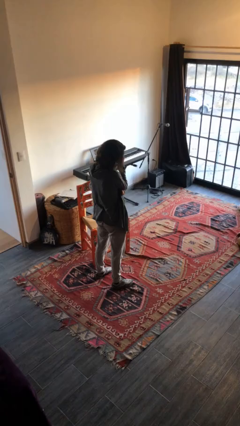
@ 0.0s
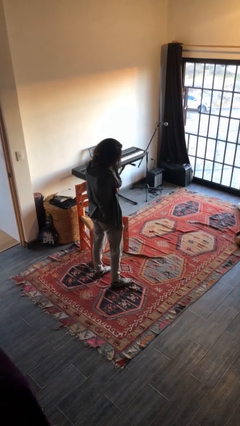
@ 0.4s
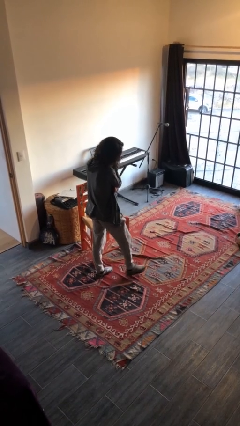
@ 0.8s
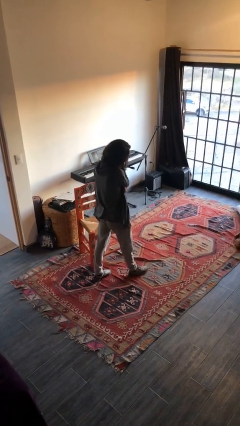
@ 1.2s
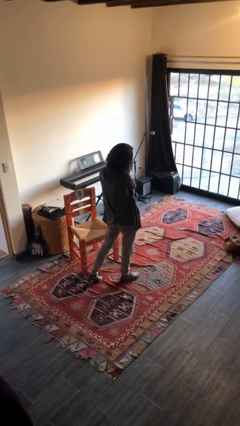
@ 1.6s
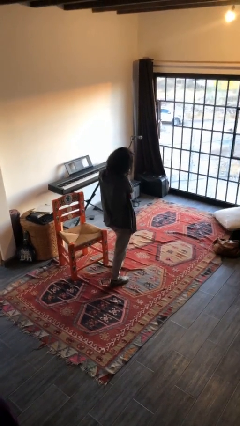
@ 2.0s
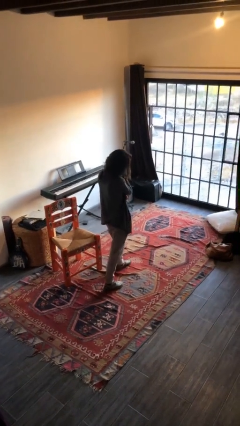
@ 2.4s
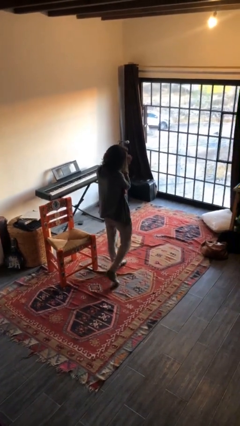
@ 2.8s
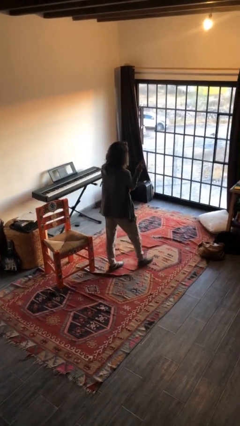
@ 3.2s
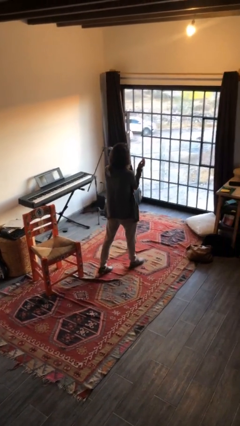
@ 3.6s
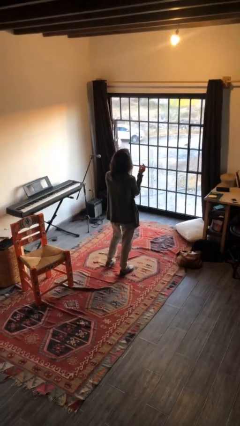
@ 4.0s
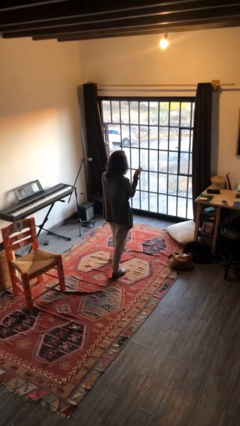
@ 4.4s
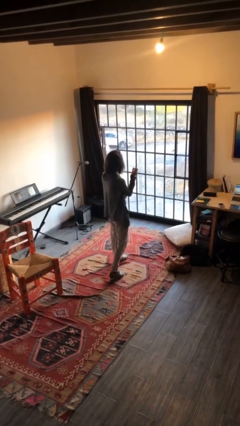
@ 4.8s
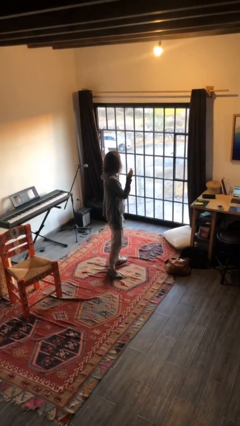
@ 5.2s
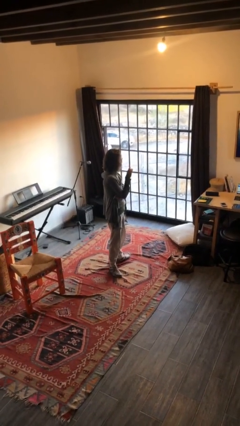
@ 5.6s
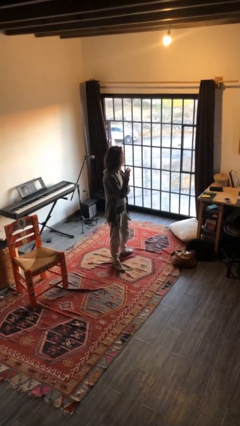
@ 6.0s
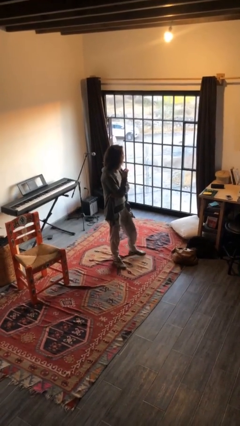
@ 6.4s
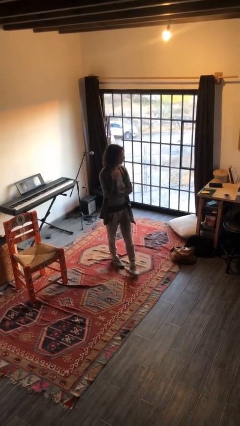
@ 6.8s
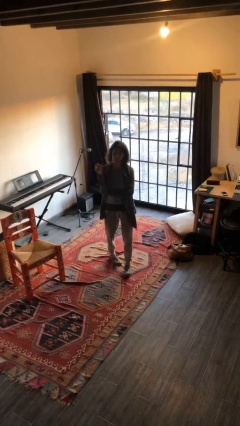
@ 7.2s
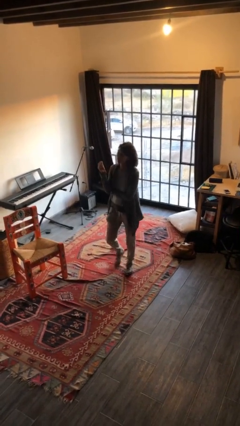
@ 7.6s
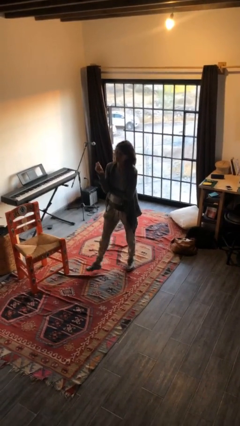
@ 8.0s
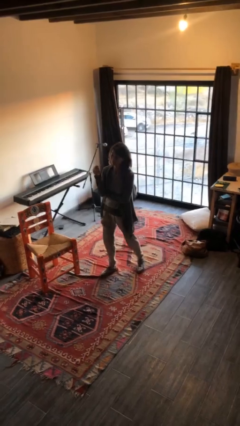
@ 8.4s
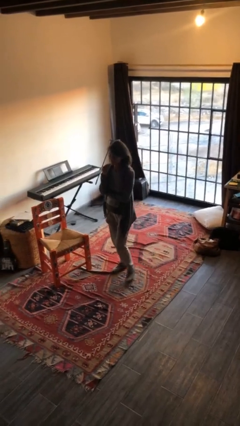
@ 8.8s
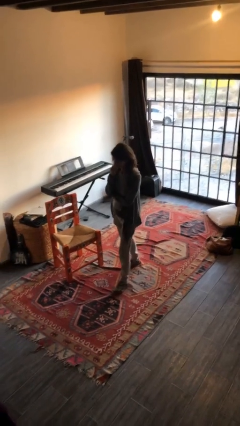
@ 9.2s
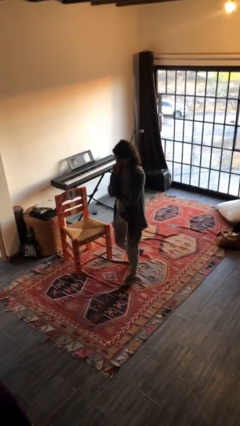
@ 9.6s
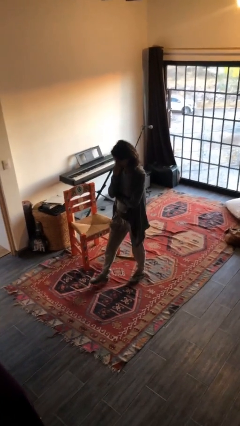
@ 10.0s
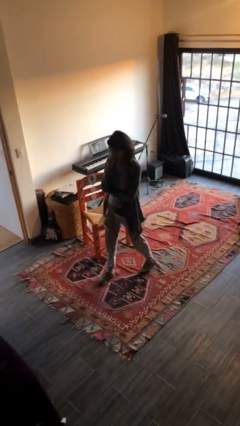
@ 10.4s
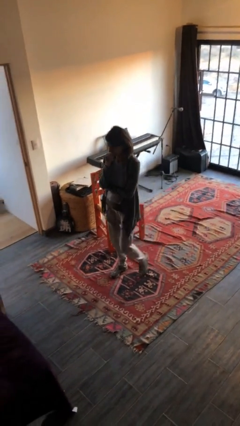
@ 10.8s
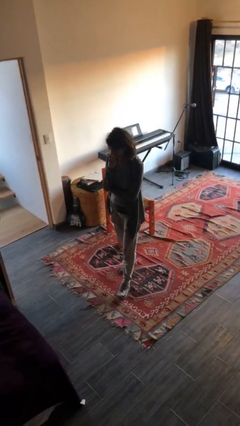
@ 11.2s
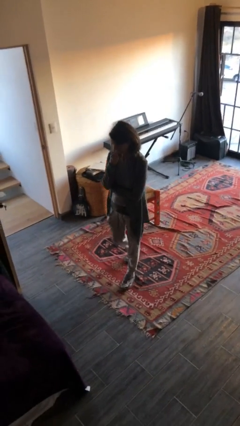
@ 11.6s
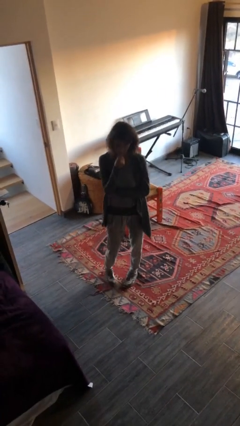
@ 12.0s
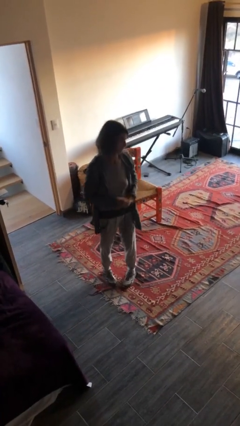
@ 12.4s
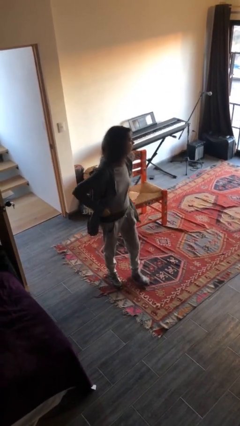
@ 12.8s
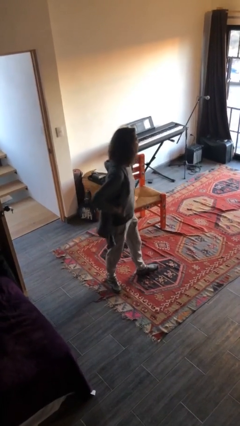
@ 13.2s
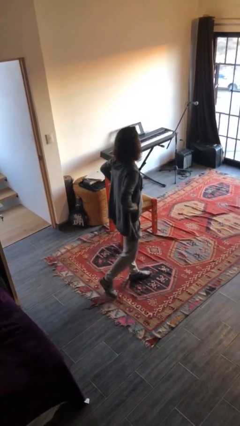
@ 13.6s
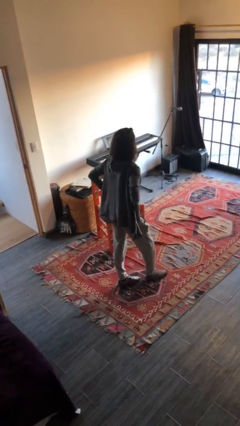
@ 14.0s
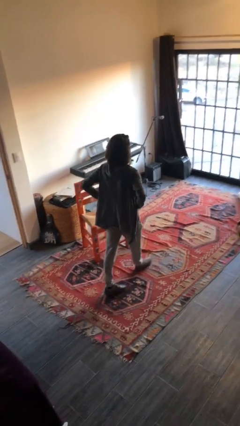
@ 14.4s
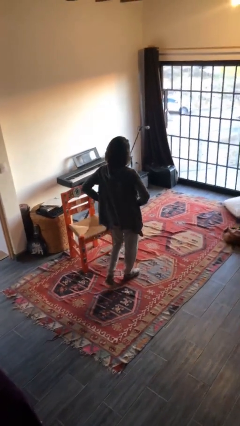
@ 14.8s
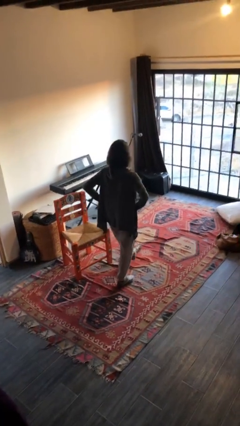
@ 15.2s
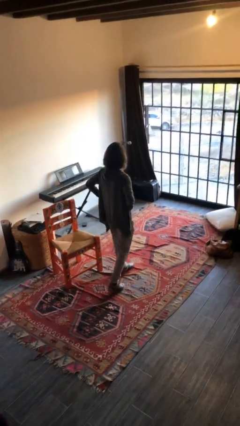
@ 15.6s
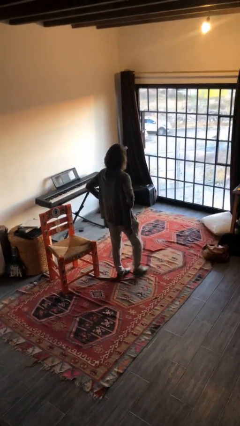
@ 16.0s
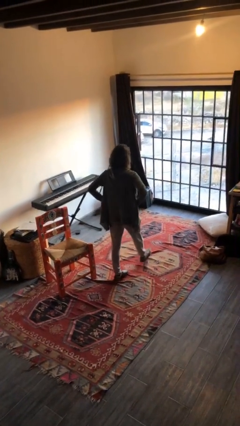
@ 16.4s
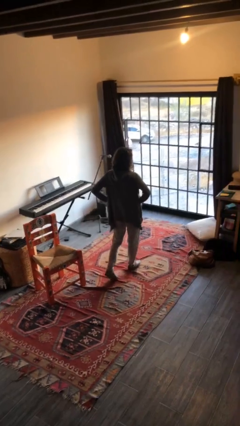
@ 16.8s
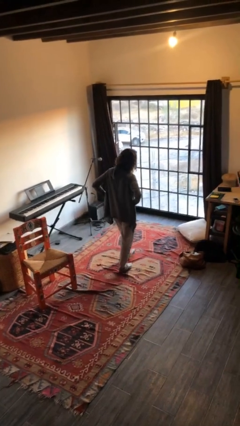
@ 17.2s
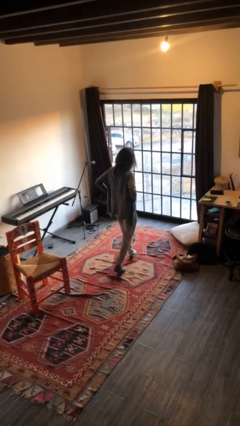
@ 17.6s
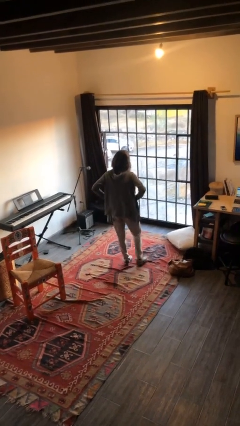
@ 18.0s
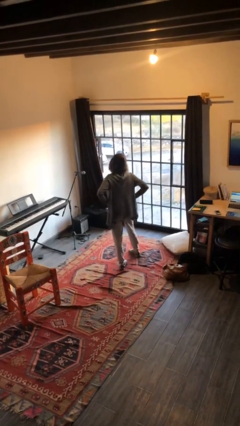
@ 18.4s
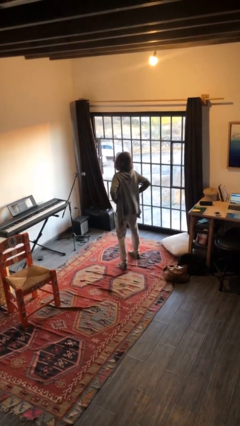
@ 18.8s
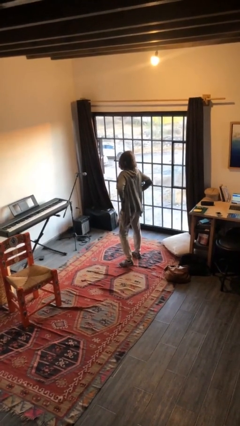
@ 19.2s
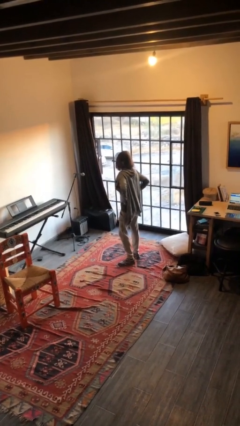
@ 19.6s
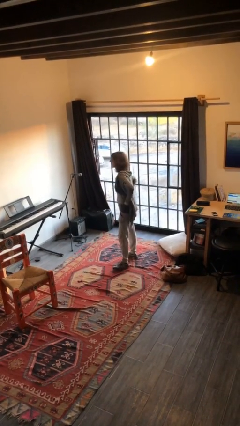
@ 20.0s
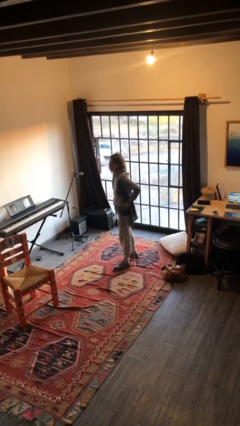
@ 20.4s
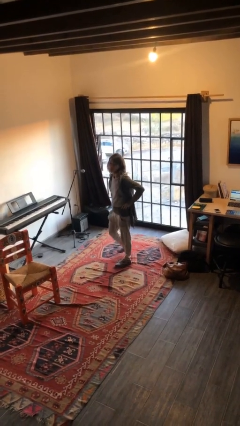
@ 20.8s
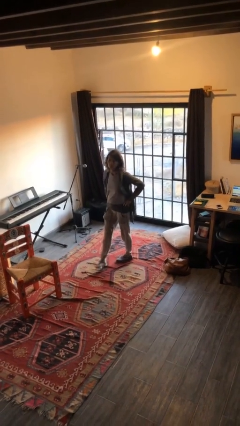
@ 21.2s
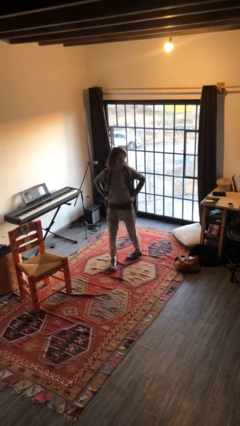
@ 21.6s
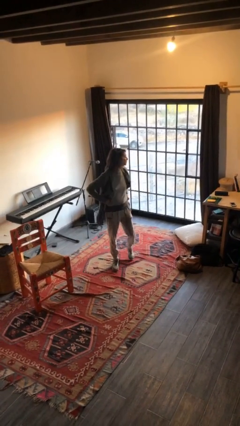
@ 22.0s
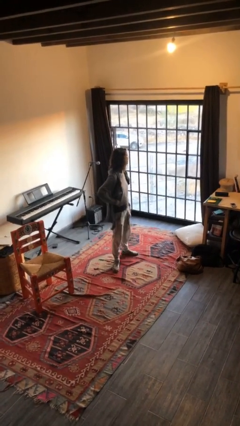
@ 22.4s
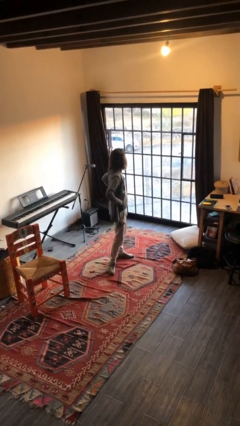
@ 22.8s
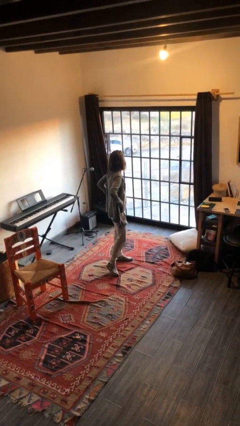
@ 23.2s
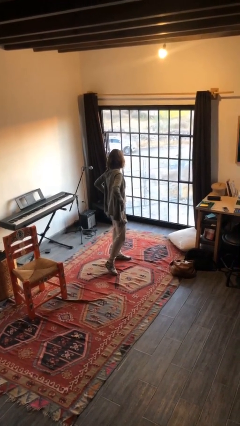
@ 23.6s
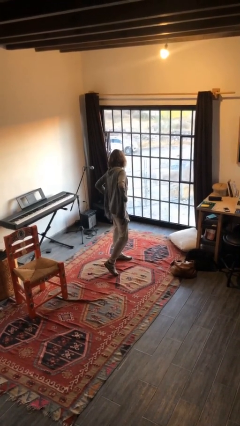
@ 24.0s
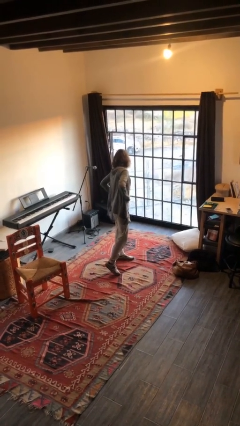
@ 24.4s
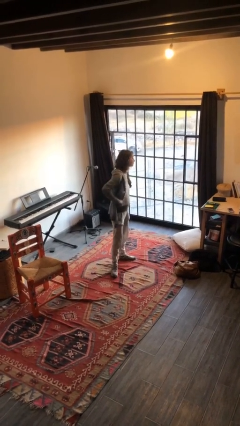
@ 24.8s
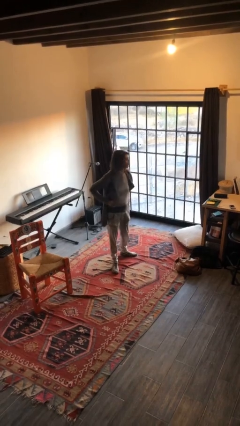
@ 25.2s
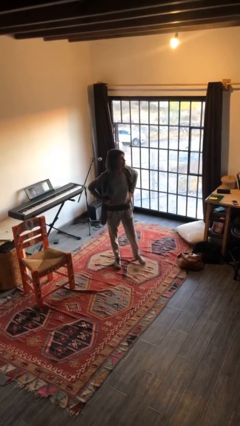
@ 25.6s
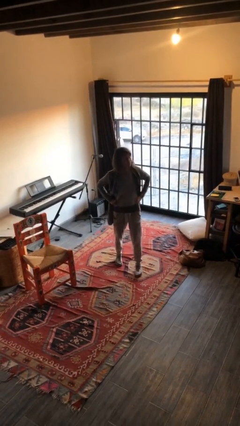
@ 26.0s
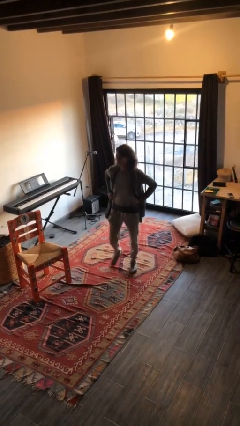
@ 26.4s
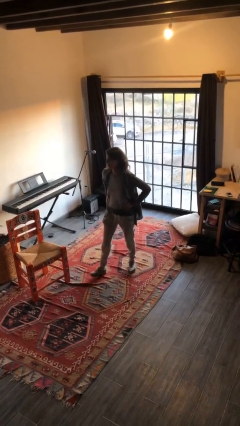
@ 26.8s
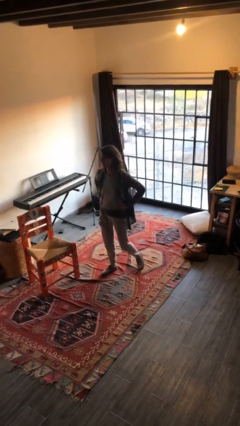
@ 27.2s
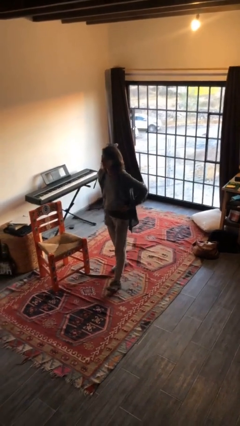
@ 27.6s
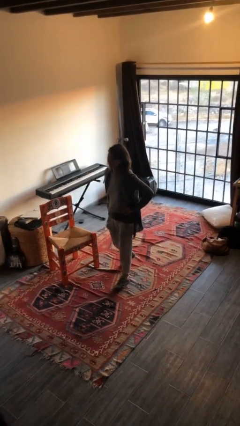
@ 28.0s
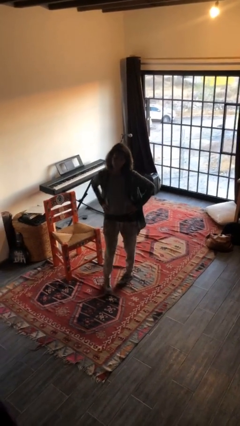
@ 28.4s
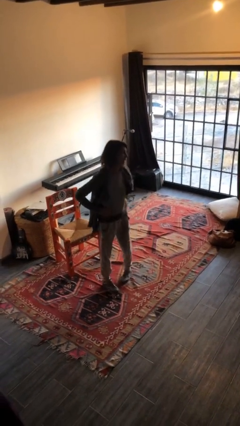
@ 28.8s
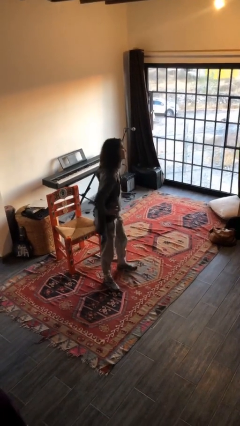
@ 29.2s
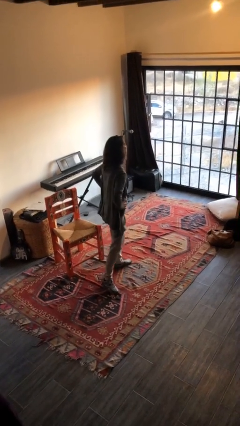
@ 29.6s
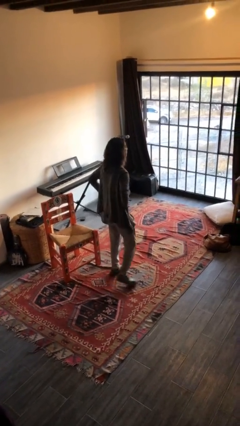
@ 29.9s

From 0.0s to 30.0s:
person walks

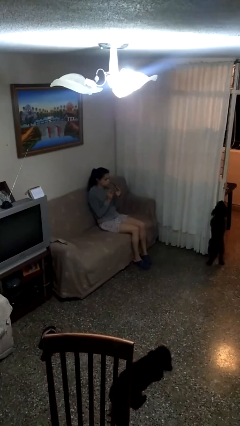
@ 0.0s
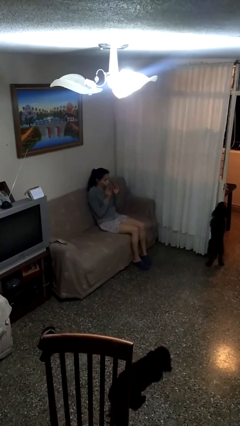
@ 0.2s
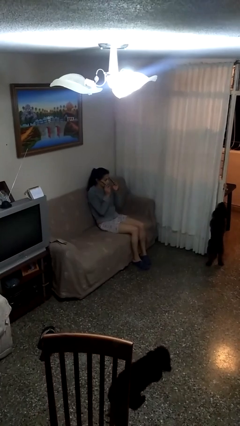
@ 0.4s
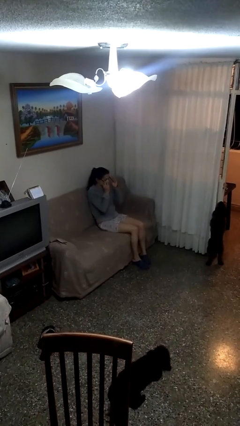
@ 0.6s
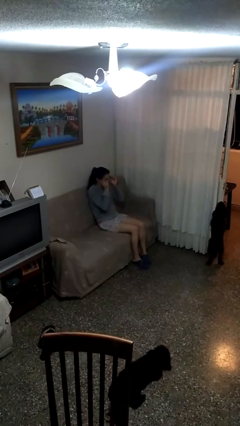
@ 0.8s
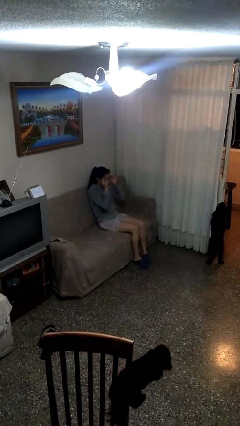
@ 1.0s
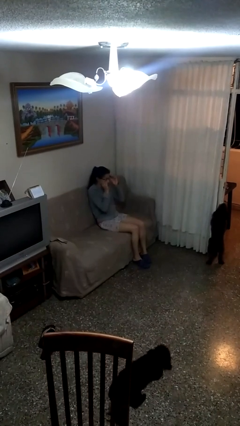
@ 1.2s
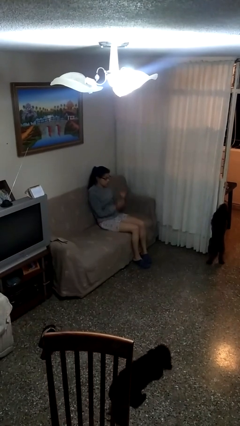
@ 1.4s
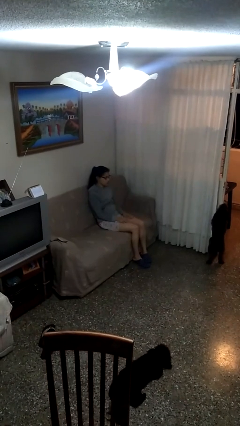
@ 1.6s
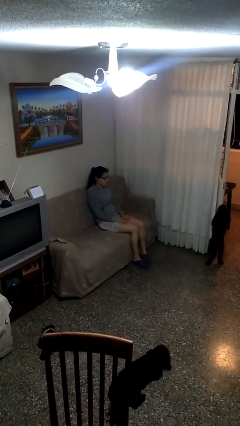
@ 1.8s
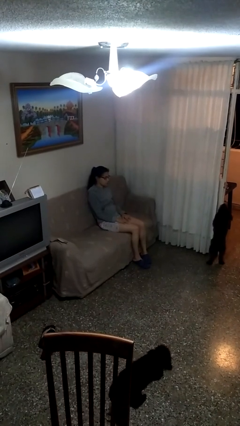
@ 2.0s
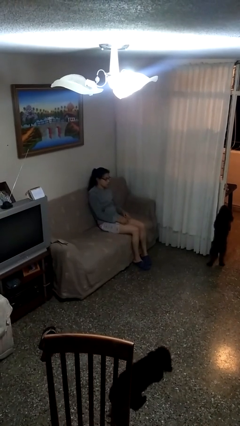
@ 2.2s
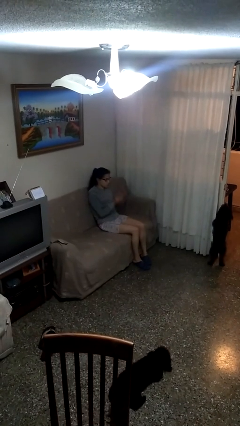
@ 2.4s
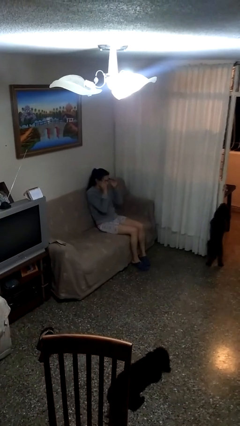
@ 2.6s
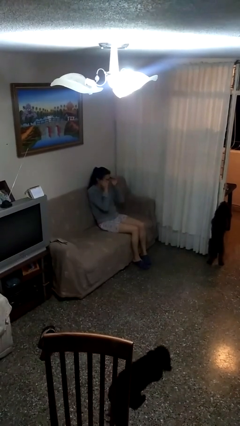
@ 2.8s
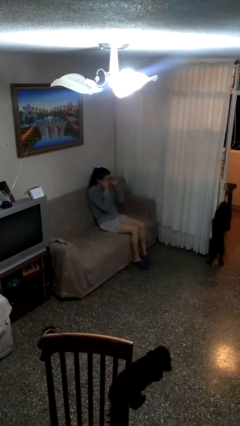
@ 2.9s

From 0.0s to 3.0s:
person puts on glasses

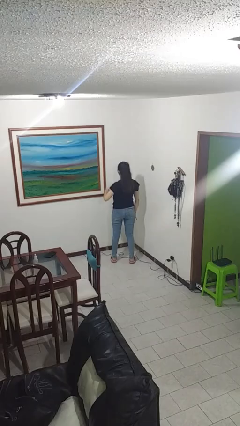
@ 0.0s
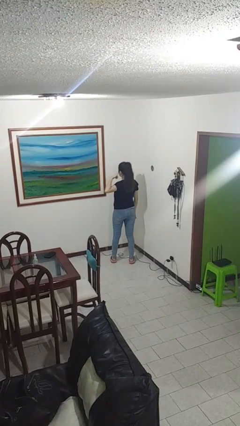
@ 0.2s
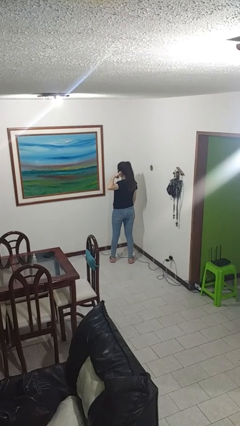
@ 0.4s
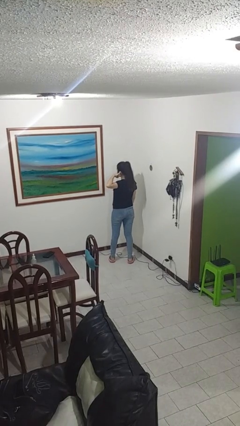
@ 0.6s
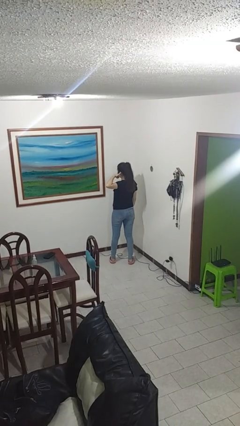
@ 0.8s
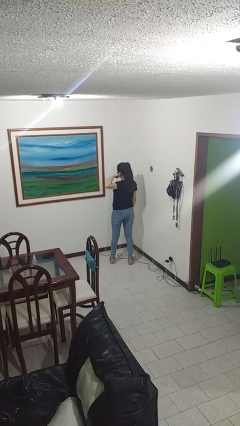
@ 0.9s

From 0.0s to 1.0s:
person gestures call me
